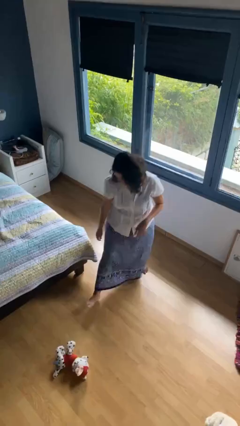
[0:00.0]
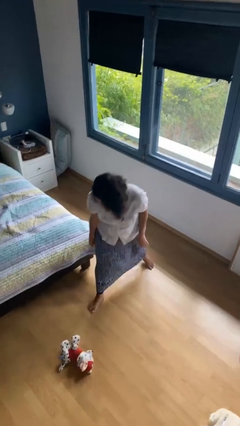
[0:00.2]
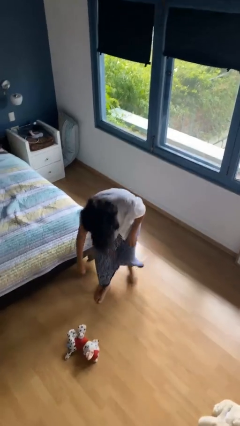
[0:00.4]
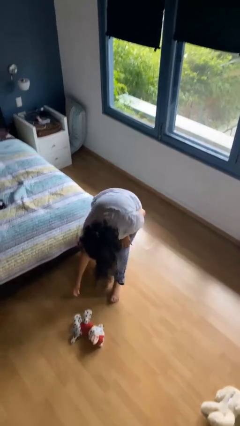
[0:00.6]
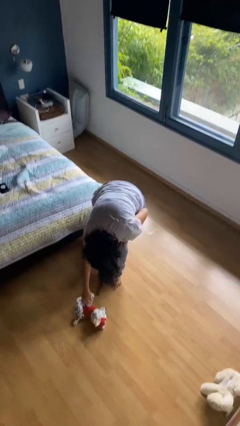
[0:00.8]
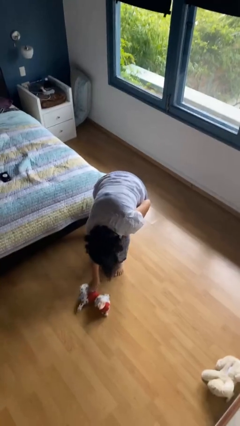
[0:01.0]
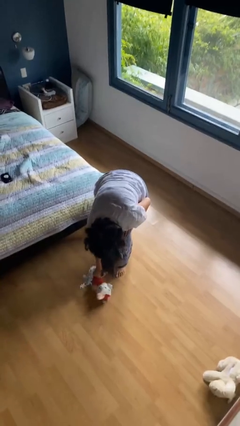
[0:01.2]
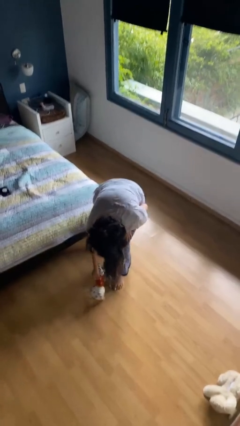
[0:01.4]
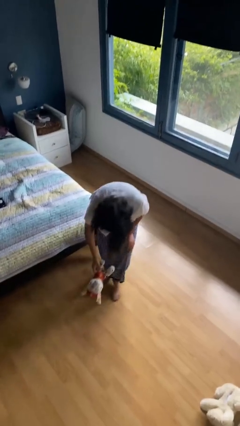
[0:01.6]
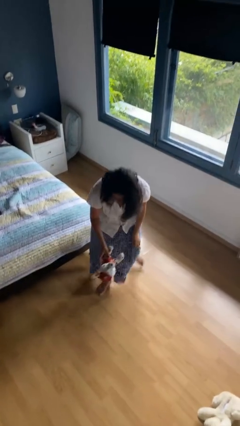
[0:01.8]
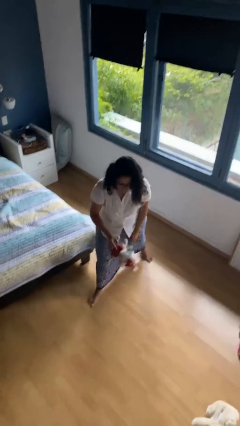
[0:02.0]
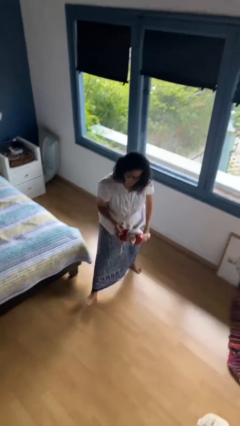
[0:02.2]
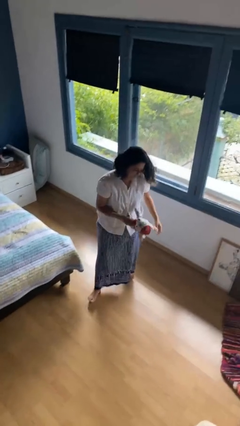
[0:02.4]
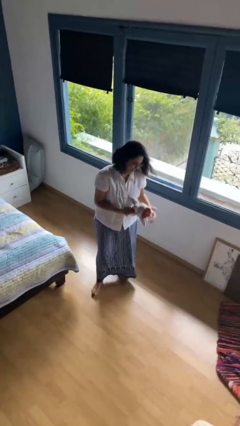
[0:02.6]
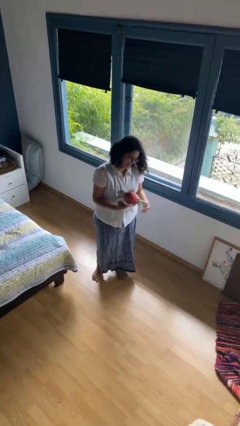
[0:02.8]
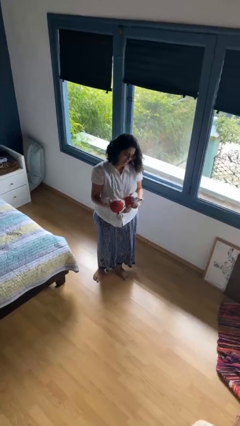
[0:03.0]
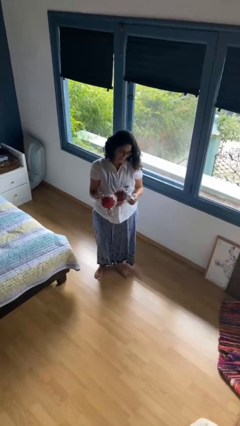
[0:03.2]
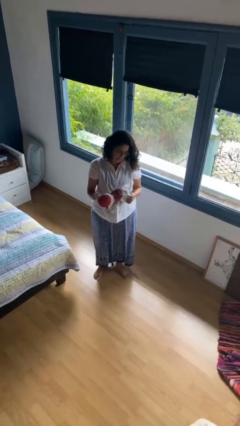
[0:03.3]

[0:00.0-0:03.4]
person picks up object from floor

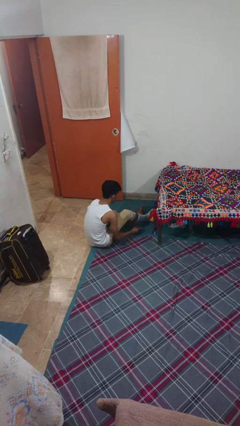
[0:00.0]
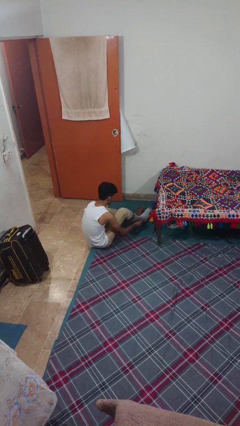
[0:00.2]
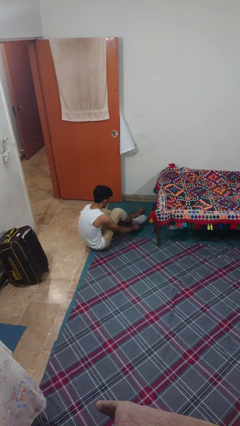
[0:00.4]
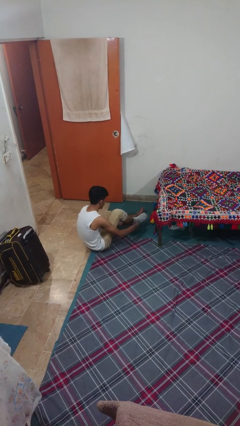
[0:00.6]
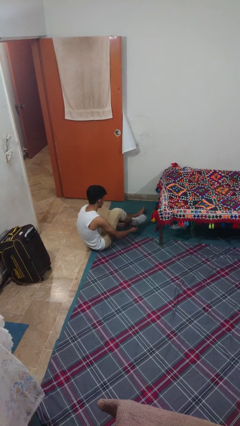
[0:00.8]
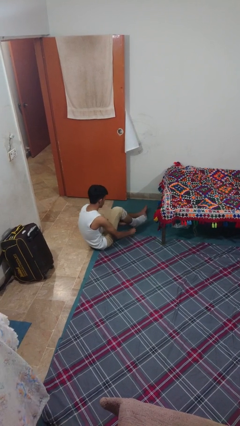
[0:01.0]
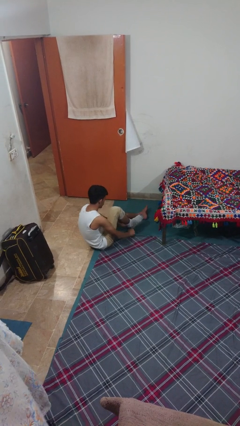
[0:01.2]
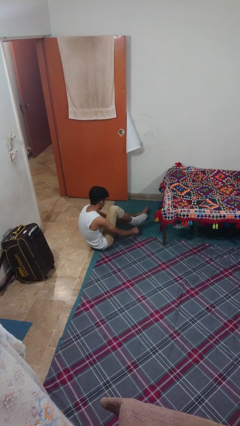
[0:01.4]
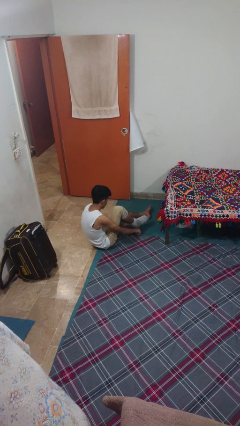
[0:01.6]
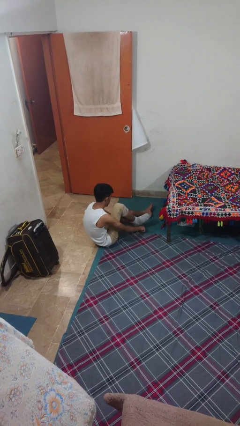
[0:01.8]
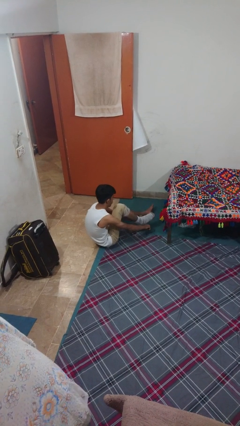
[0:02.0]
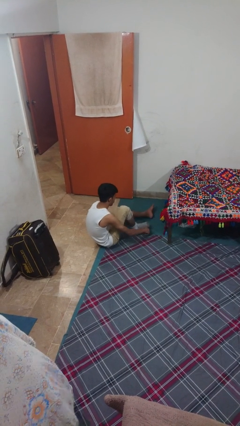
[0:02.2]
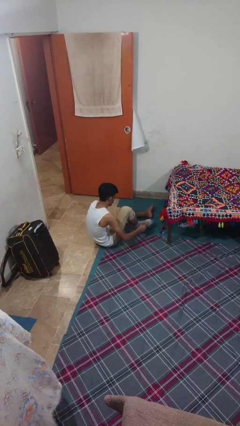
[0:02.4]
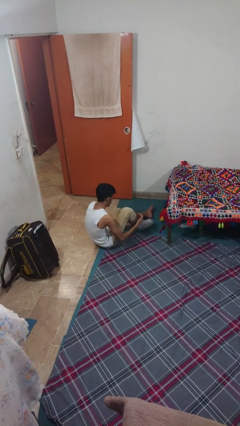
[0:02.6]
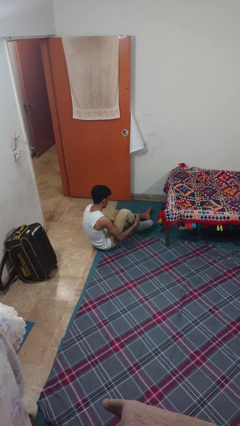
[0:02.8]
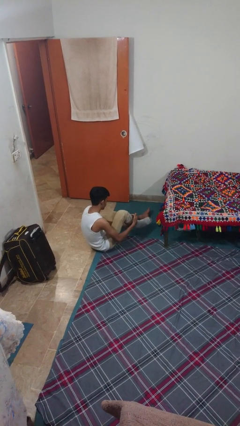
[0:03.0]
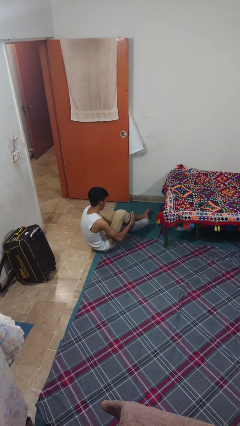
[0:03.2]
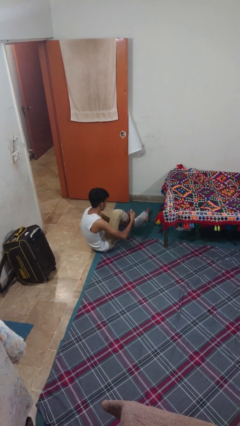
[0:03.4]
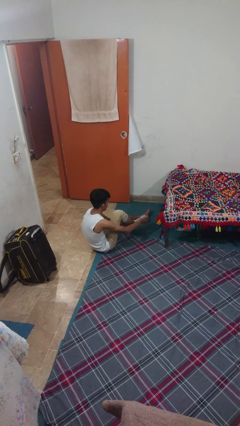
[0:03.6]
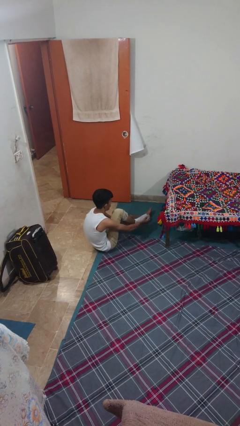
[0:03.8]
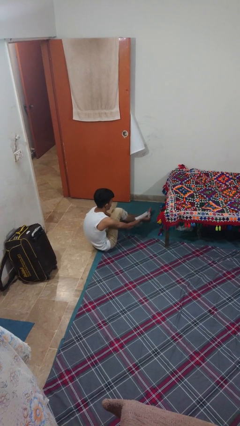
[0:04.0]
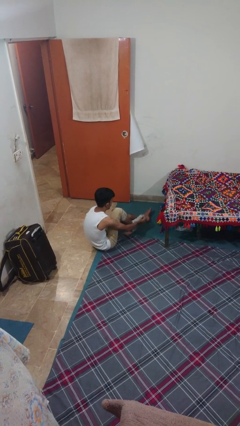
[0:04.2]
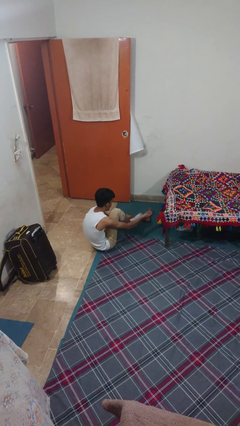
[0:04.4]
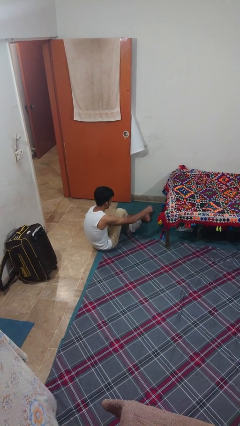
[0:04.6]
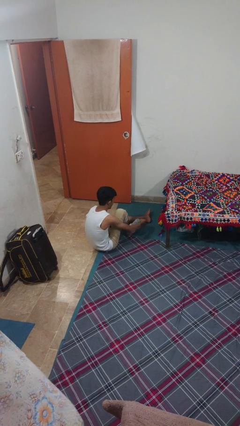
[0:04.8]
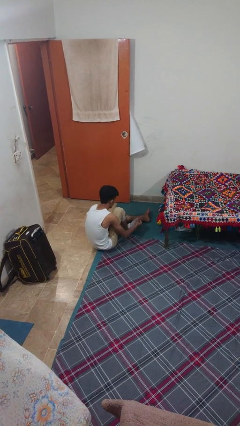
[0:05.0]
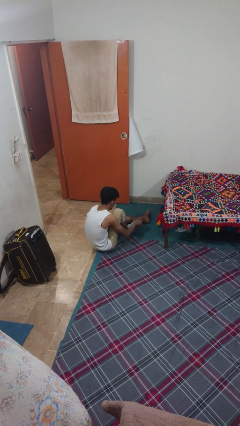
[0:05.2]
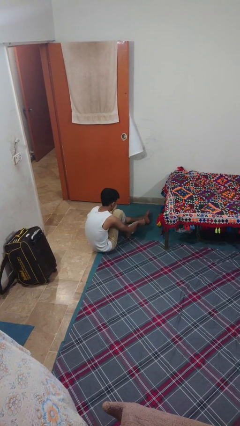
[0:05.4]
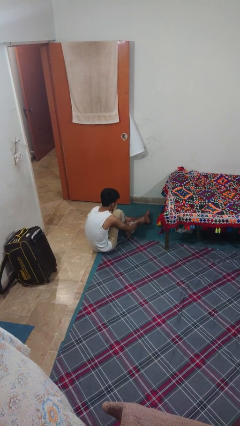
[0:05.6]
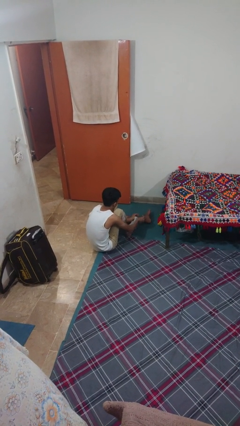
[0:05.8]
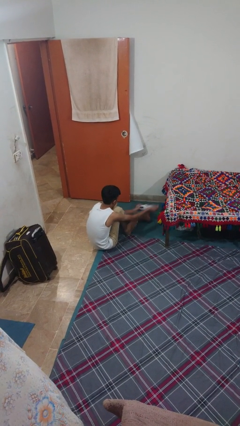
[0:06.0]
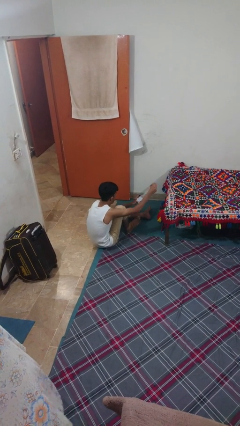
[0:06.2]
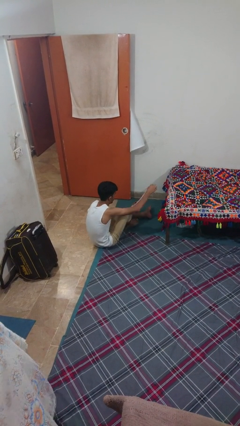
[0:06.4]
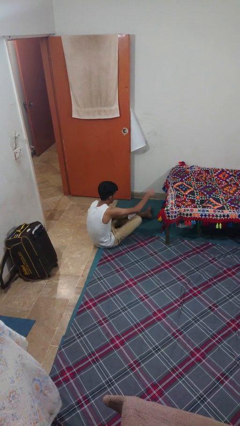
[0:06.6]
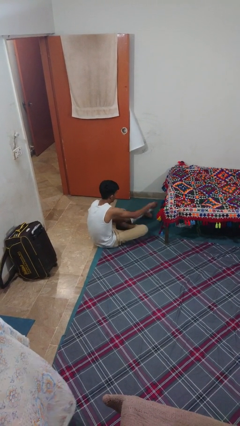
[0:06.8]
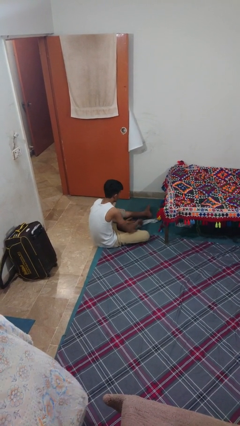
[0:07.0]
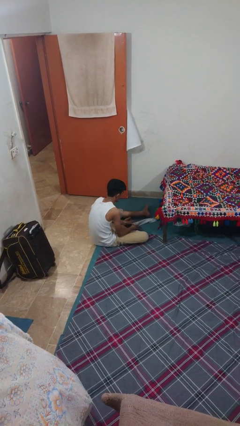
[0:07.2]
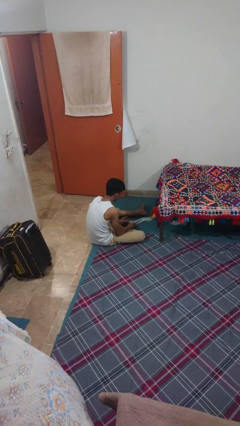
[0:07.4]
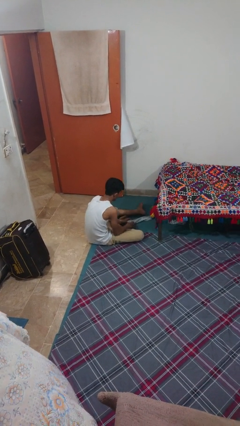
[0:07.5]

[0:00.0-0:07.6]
person takes off socks

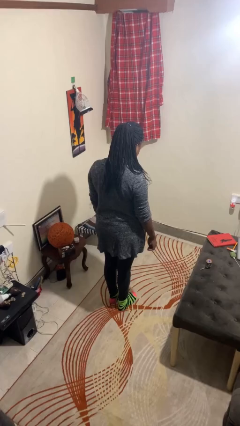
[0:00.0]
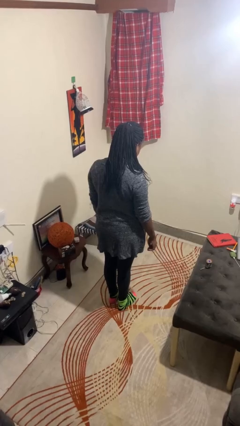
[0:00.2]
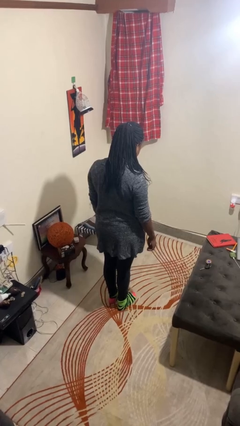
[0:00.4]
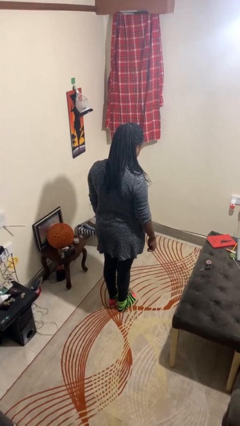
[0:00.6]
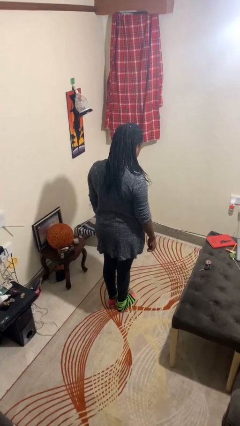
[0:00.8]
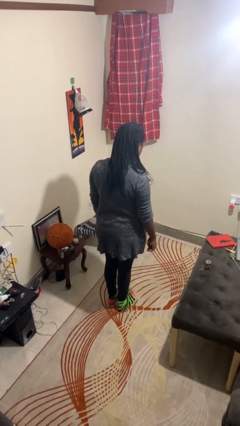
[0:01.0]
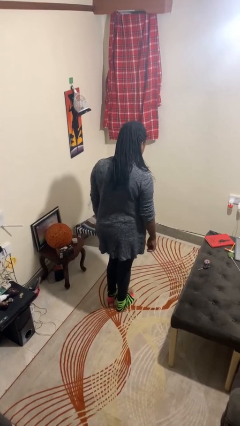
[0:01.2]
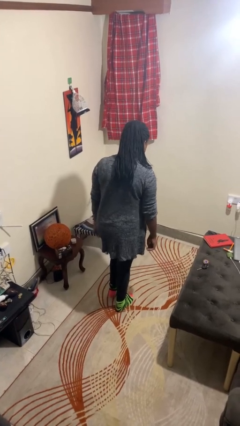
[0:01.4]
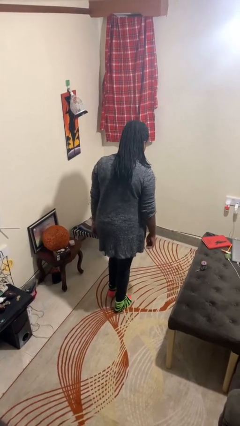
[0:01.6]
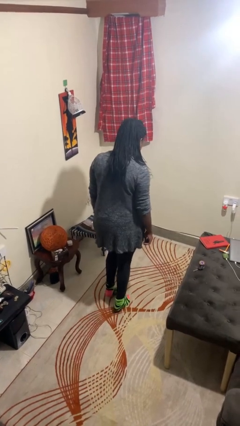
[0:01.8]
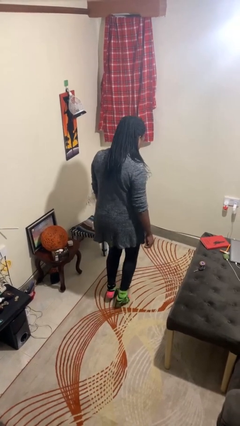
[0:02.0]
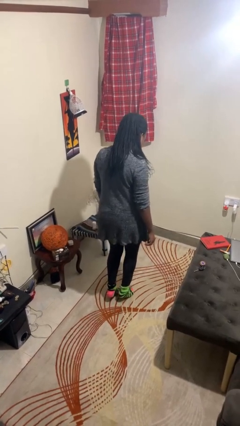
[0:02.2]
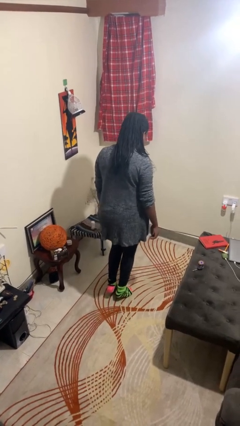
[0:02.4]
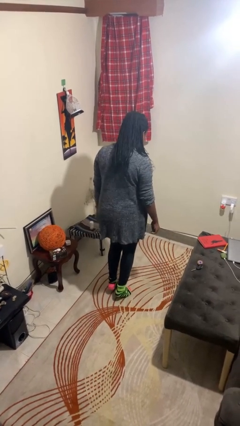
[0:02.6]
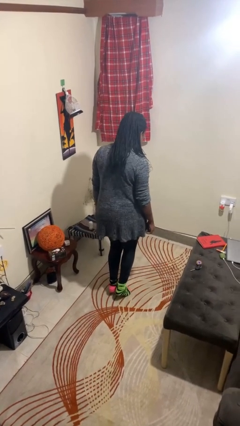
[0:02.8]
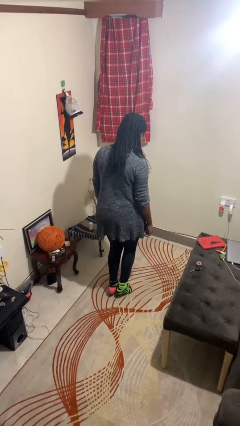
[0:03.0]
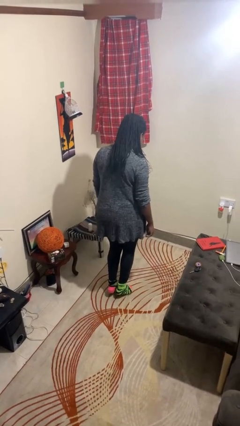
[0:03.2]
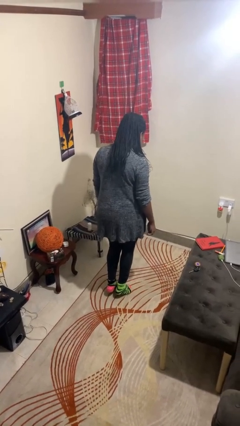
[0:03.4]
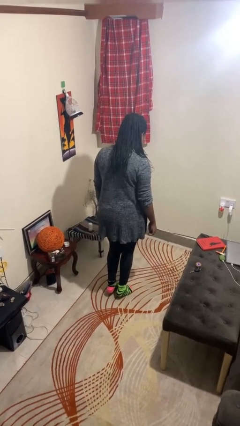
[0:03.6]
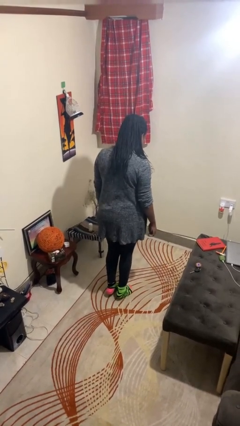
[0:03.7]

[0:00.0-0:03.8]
person walks tiptoe

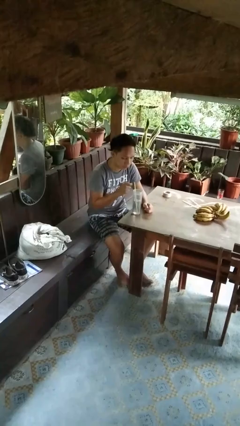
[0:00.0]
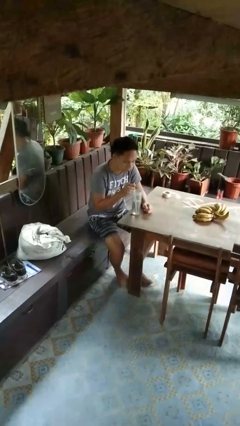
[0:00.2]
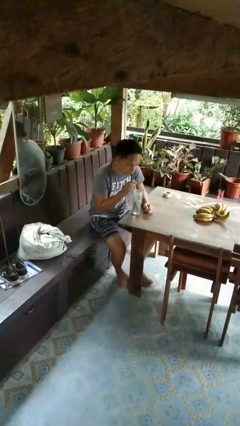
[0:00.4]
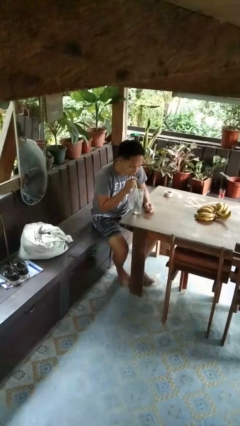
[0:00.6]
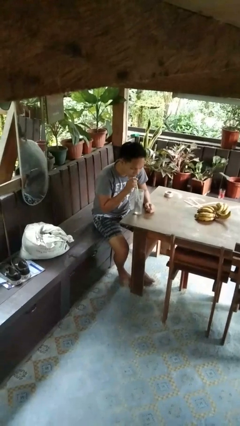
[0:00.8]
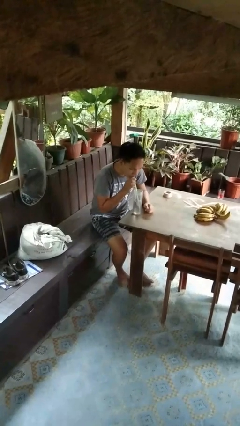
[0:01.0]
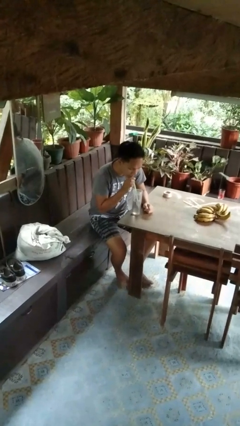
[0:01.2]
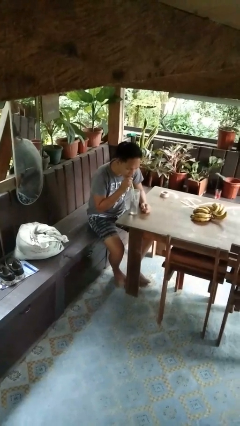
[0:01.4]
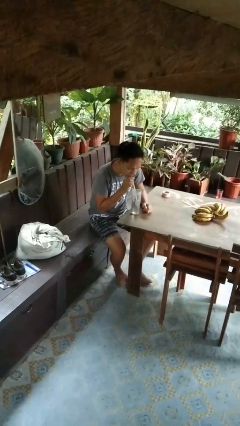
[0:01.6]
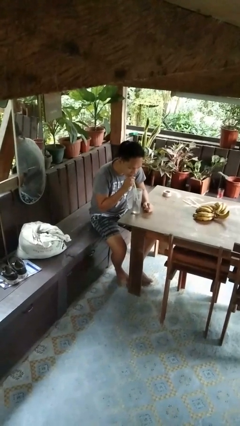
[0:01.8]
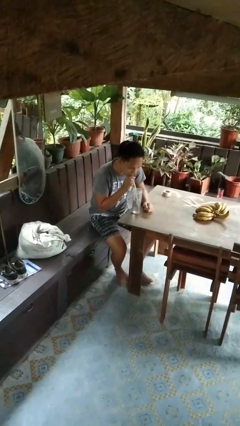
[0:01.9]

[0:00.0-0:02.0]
person drinks from straw

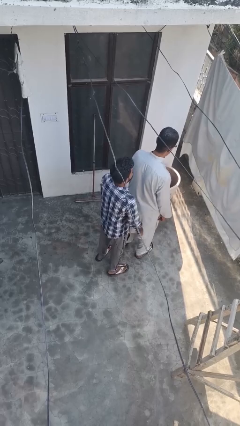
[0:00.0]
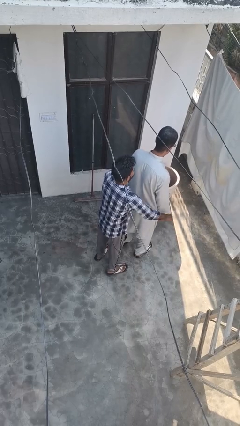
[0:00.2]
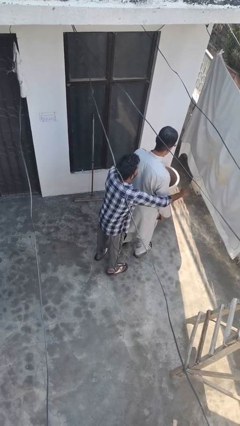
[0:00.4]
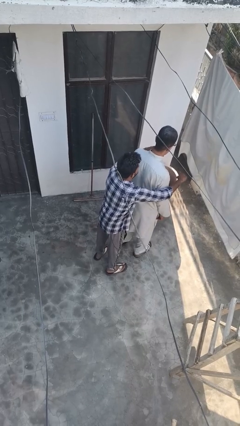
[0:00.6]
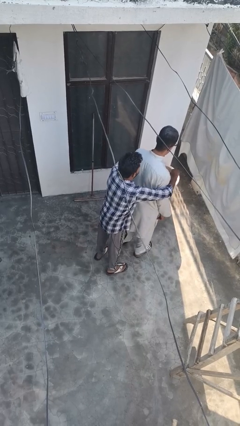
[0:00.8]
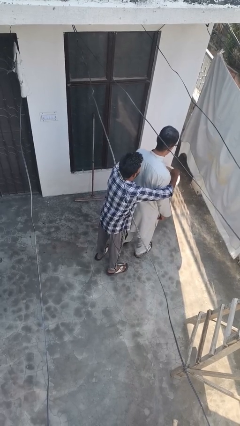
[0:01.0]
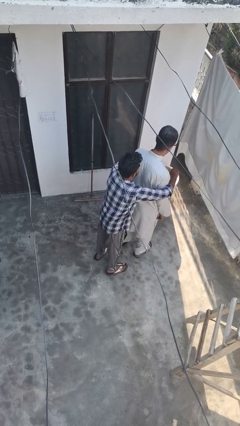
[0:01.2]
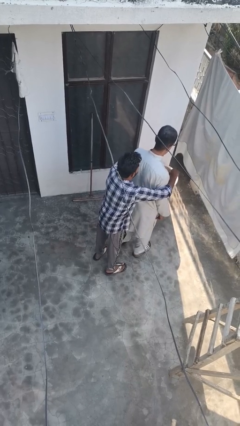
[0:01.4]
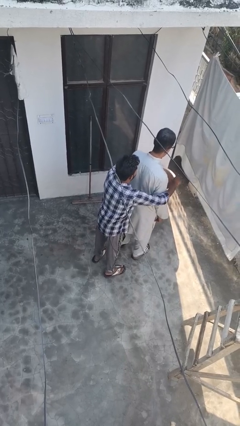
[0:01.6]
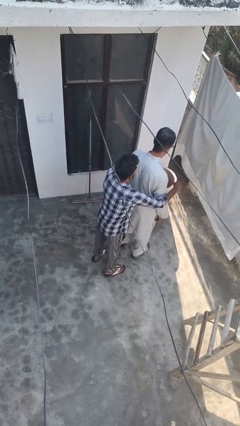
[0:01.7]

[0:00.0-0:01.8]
person hugs person from behind
